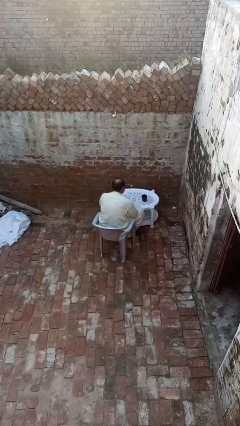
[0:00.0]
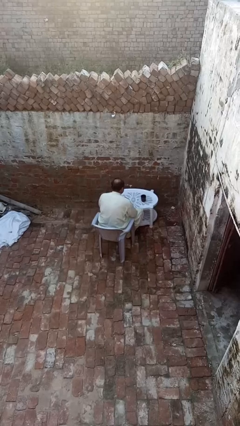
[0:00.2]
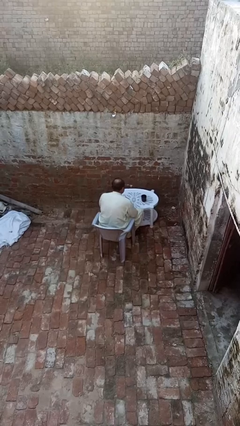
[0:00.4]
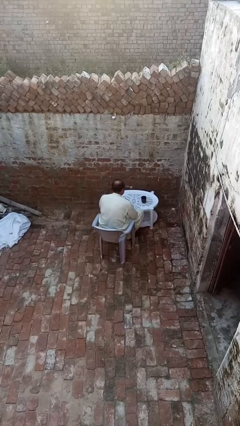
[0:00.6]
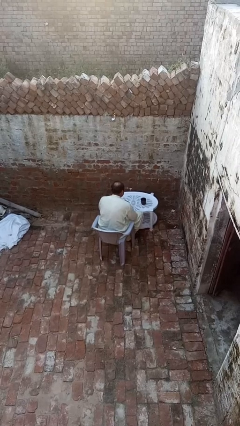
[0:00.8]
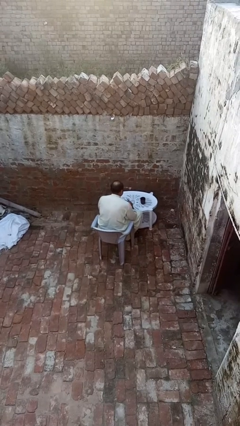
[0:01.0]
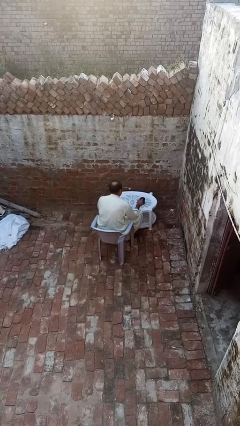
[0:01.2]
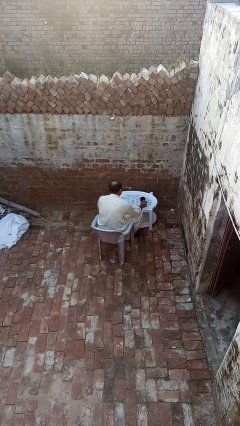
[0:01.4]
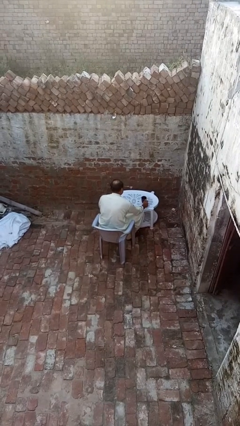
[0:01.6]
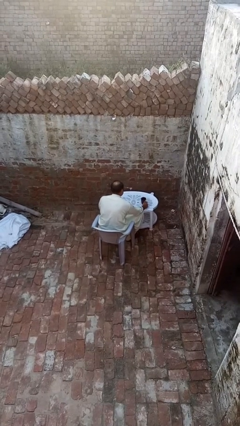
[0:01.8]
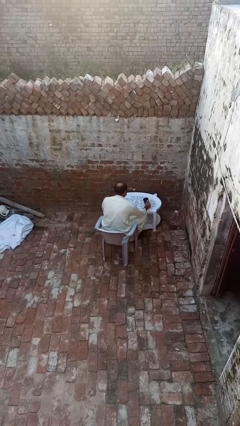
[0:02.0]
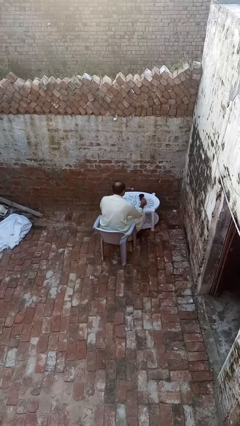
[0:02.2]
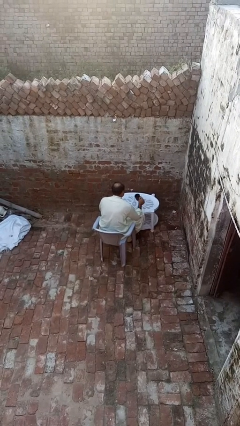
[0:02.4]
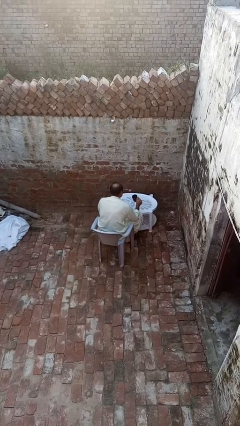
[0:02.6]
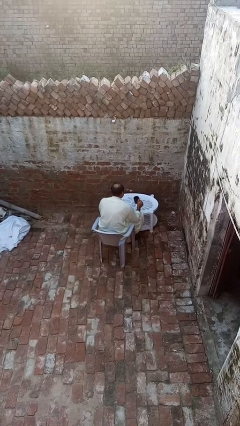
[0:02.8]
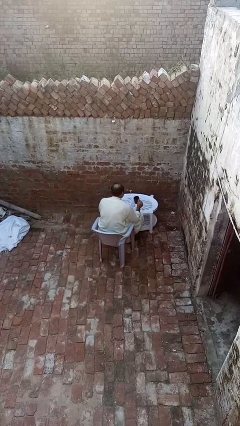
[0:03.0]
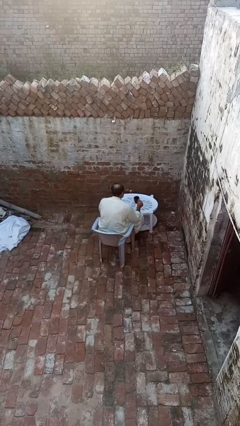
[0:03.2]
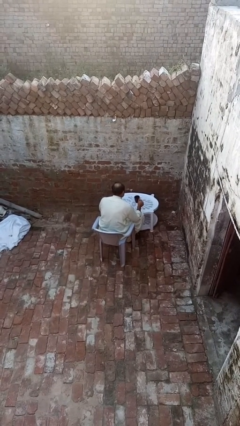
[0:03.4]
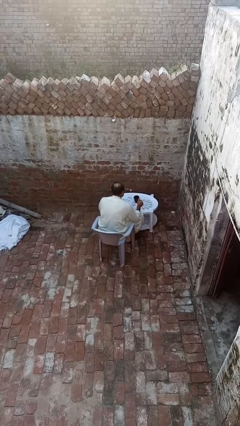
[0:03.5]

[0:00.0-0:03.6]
person picks up object from table

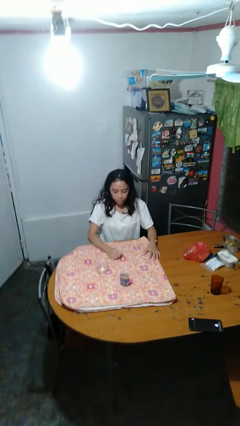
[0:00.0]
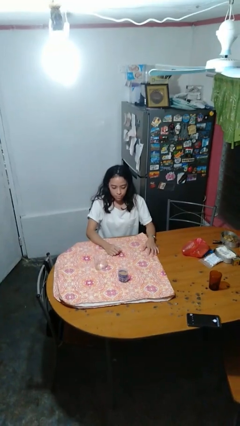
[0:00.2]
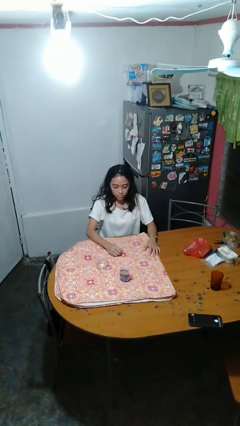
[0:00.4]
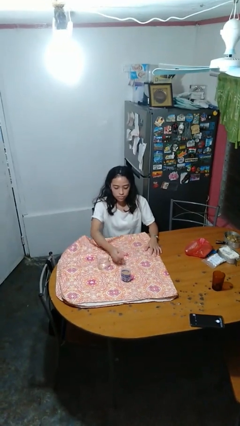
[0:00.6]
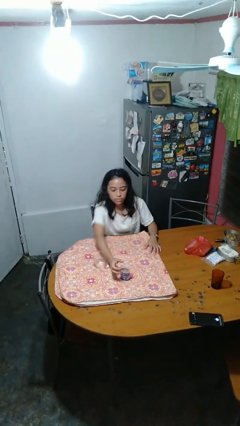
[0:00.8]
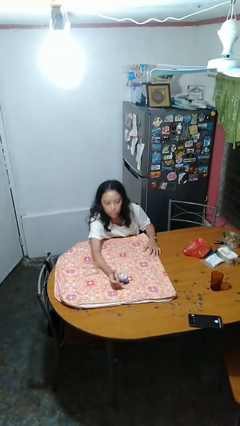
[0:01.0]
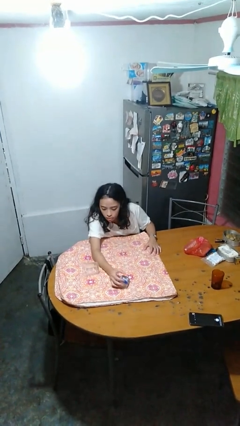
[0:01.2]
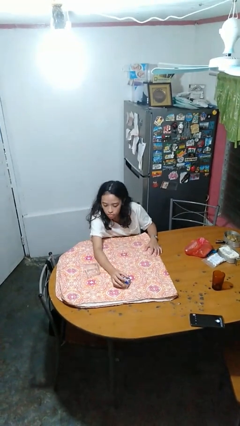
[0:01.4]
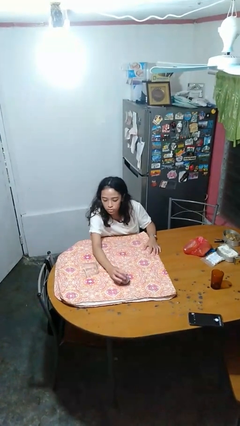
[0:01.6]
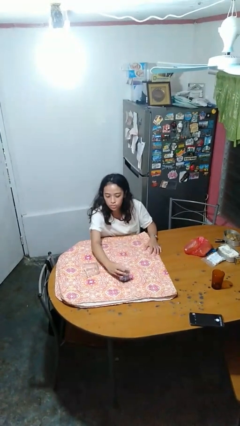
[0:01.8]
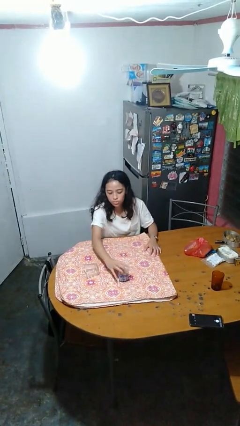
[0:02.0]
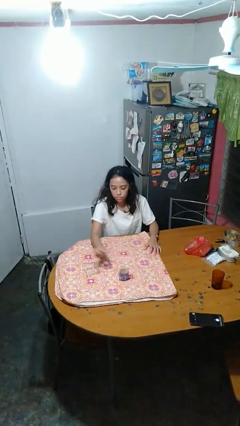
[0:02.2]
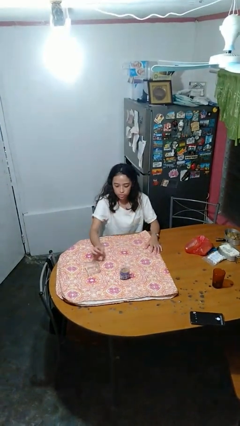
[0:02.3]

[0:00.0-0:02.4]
person knocks over glass

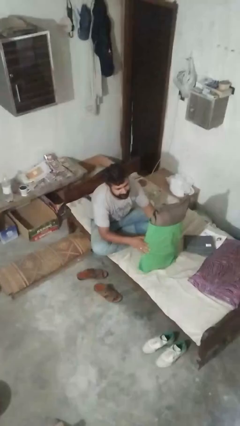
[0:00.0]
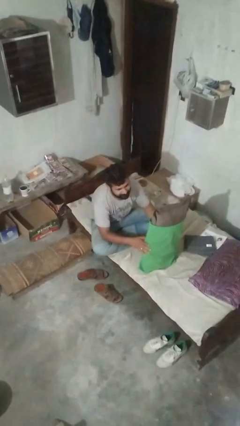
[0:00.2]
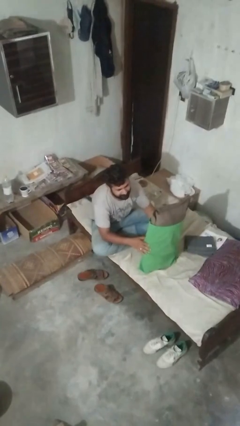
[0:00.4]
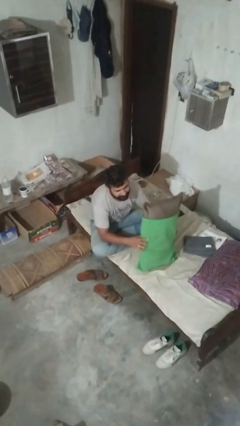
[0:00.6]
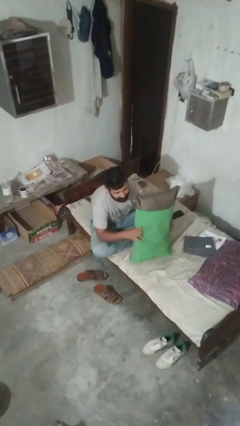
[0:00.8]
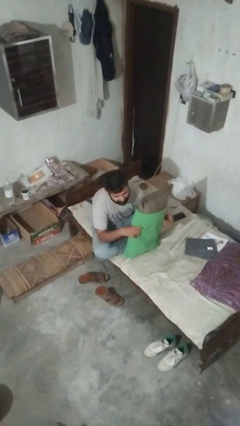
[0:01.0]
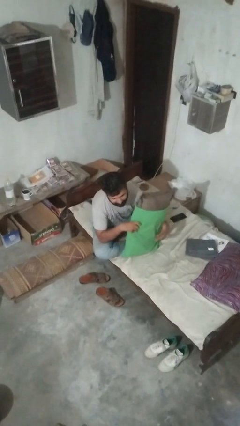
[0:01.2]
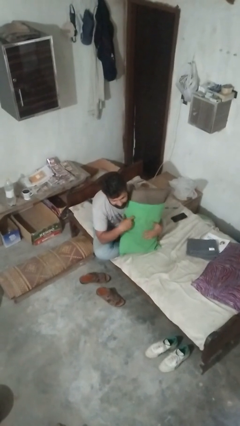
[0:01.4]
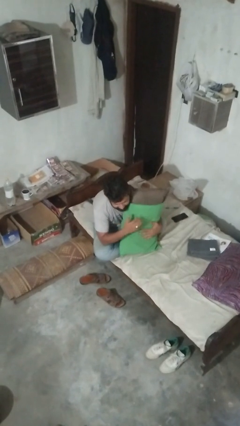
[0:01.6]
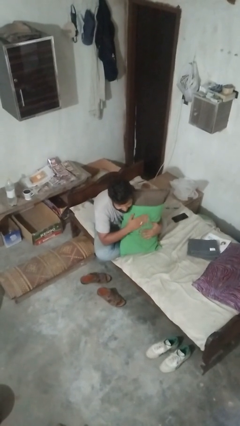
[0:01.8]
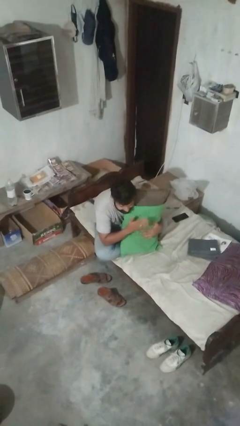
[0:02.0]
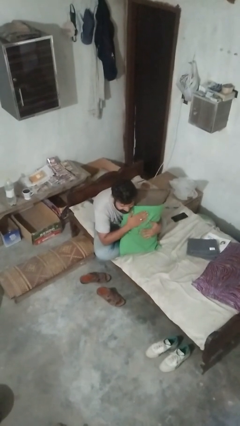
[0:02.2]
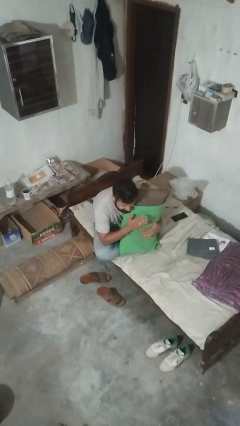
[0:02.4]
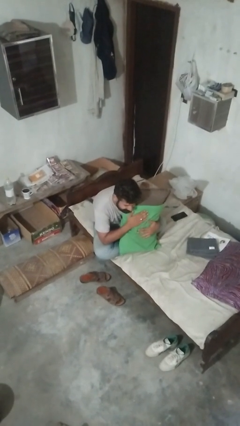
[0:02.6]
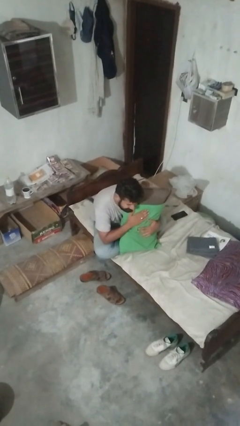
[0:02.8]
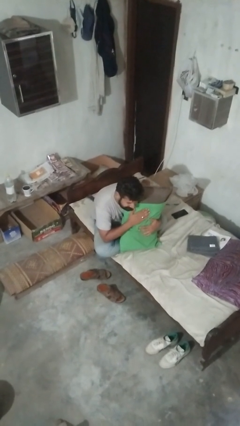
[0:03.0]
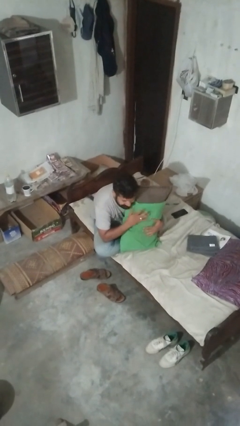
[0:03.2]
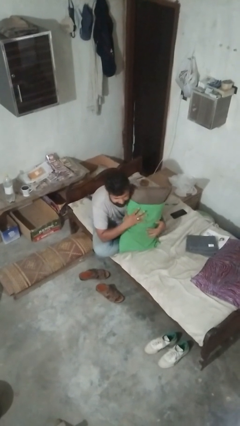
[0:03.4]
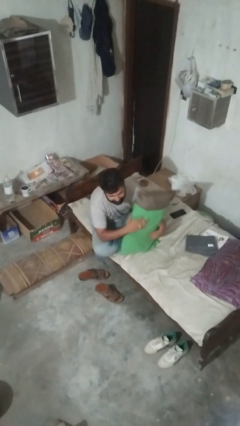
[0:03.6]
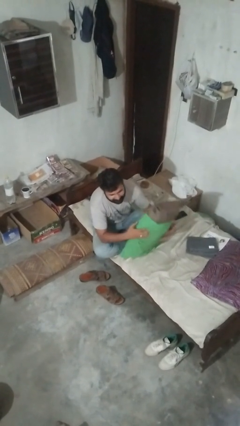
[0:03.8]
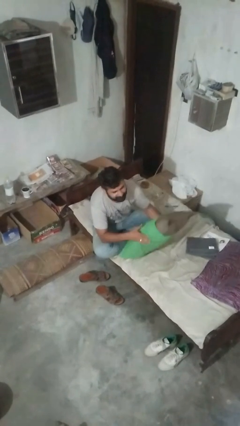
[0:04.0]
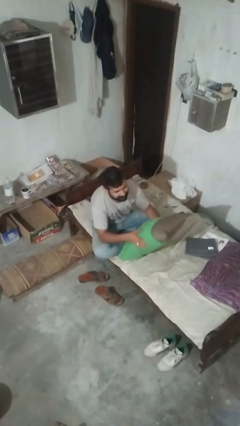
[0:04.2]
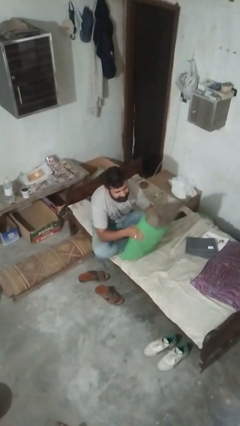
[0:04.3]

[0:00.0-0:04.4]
person hugs stuffed animal

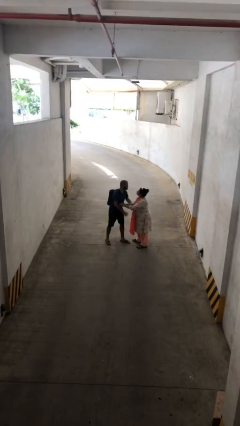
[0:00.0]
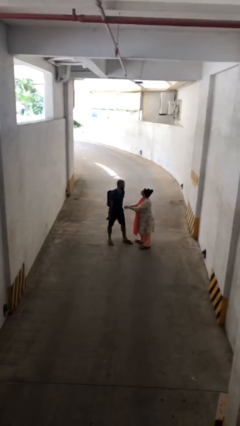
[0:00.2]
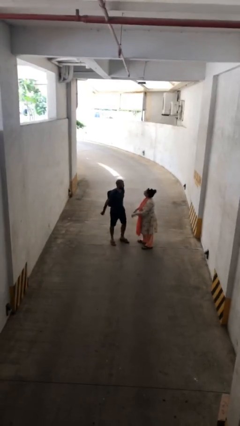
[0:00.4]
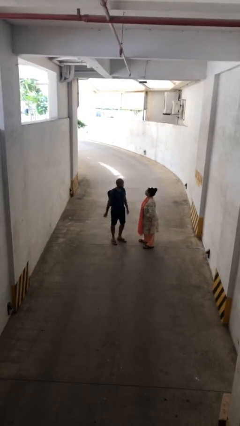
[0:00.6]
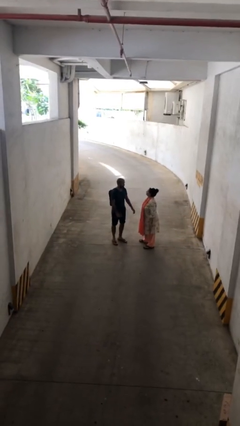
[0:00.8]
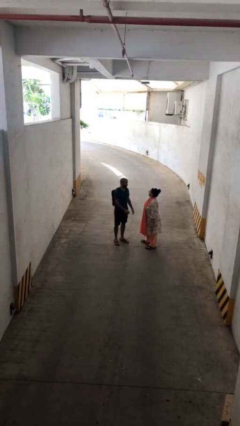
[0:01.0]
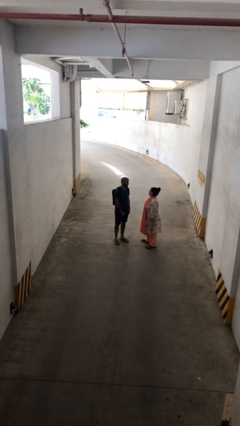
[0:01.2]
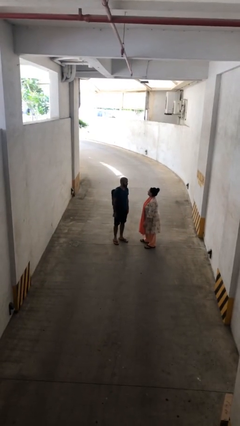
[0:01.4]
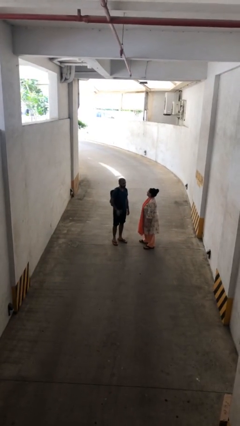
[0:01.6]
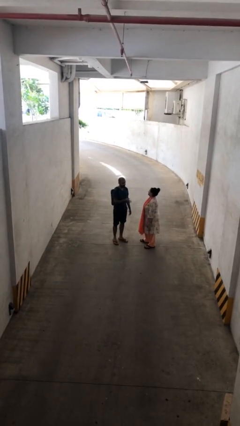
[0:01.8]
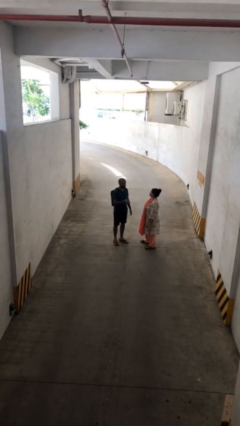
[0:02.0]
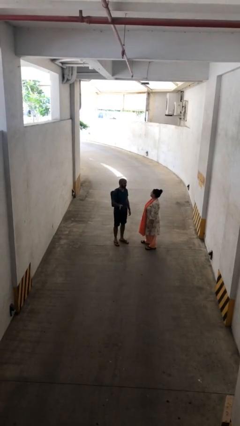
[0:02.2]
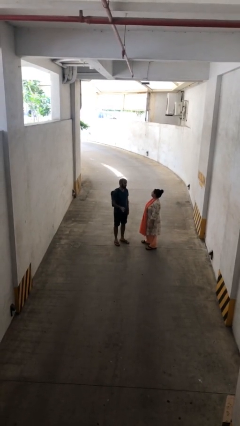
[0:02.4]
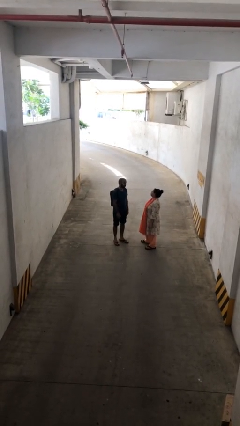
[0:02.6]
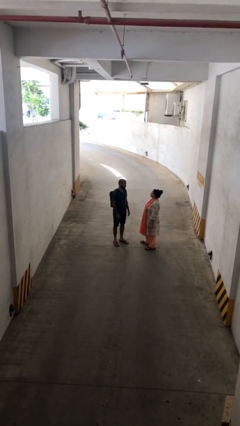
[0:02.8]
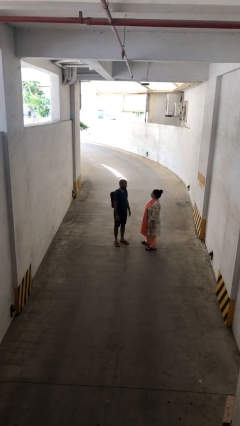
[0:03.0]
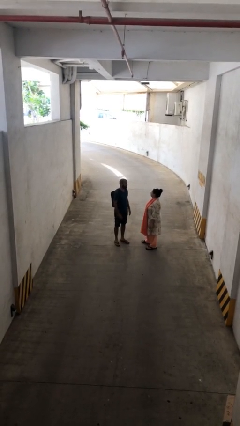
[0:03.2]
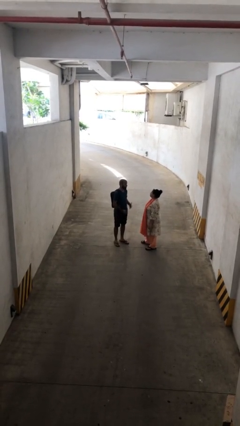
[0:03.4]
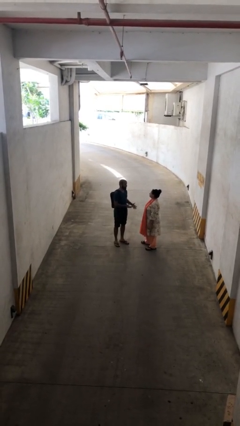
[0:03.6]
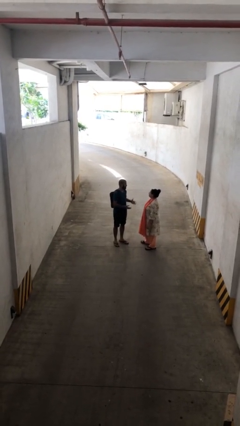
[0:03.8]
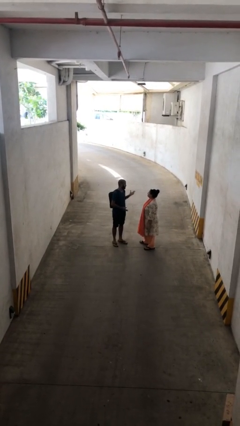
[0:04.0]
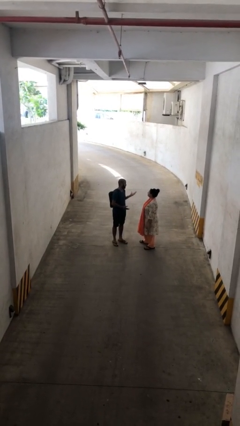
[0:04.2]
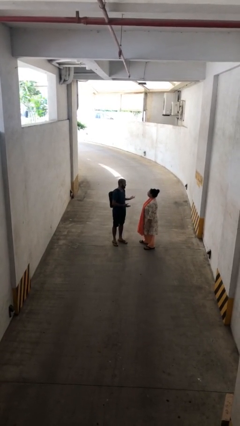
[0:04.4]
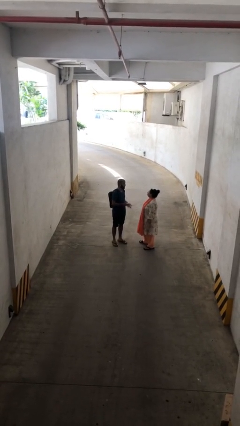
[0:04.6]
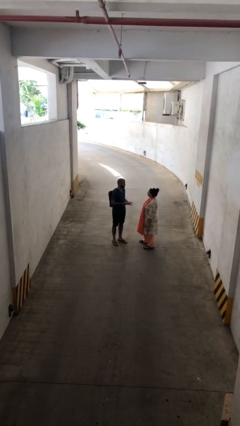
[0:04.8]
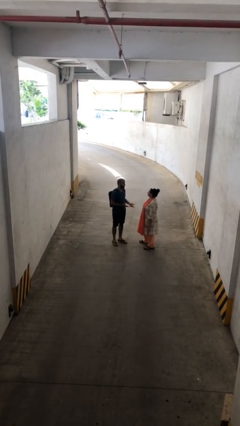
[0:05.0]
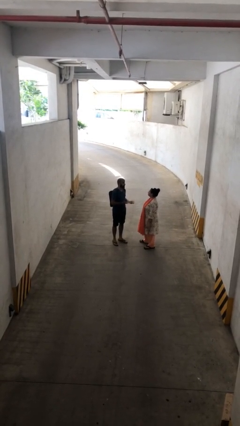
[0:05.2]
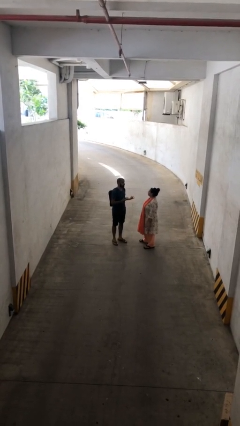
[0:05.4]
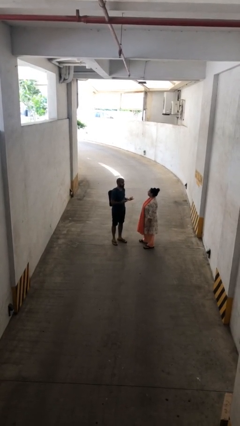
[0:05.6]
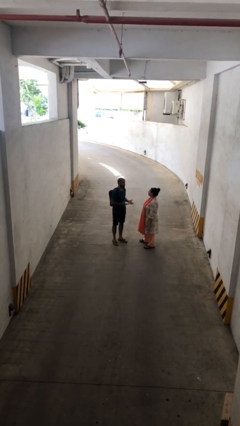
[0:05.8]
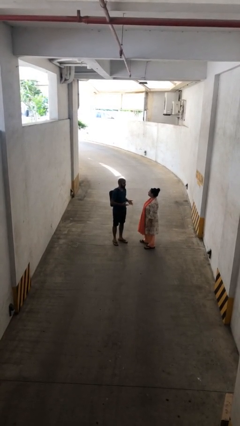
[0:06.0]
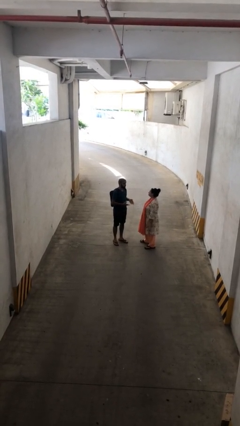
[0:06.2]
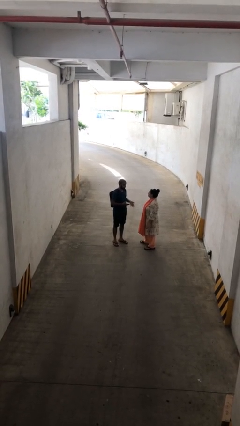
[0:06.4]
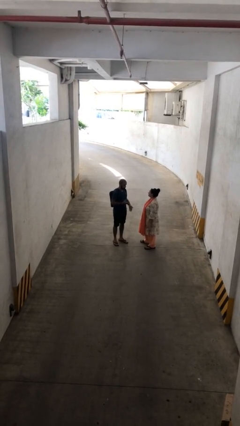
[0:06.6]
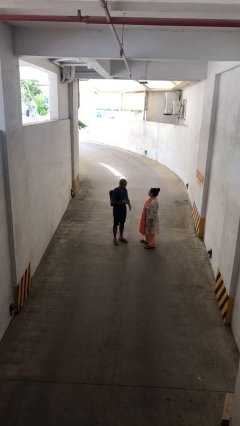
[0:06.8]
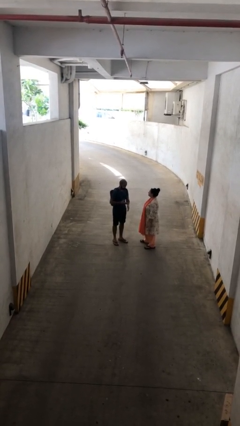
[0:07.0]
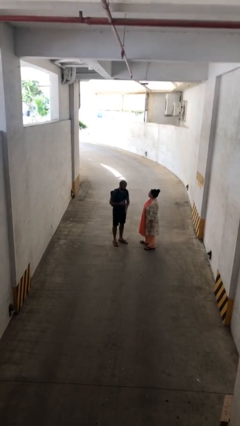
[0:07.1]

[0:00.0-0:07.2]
person talks to person

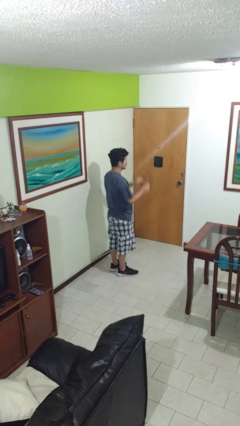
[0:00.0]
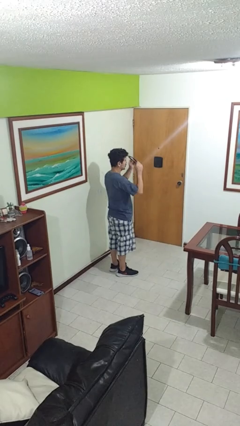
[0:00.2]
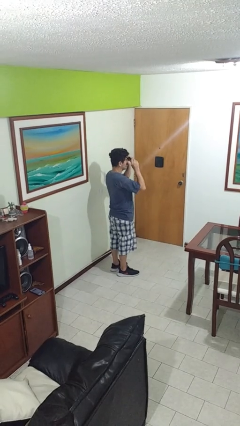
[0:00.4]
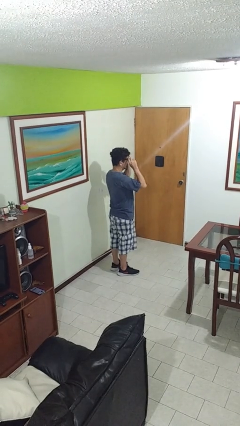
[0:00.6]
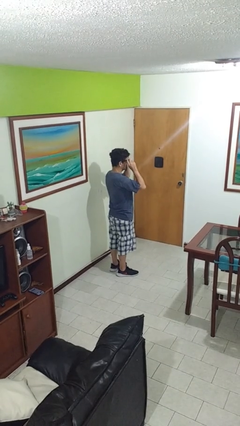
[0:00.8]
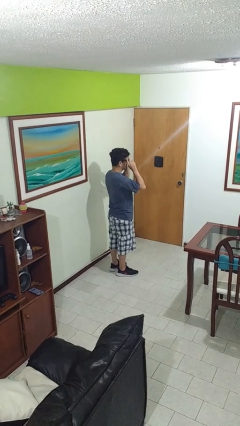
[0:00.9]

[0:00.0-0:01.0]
person puts on sunglasses
